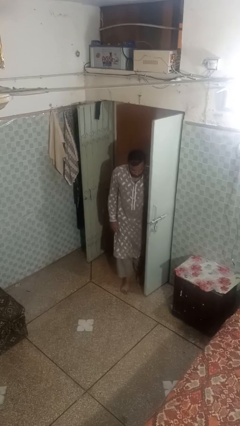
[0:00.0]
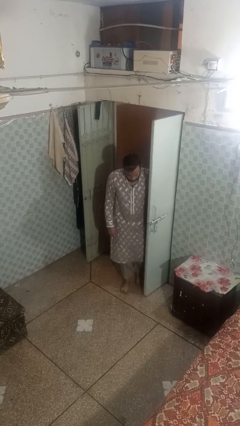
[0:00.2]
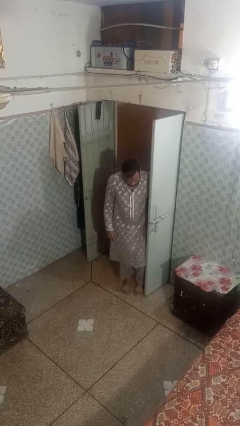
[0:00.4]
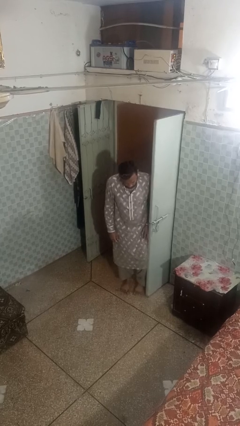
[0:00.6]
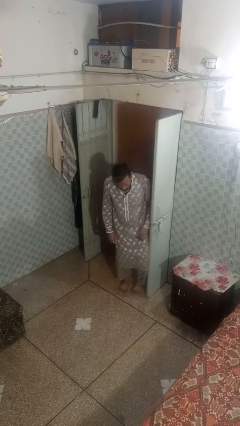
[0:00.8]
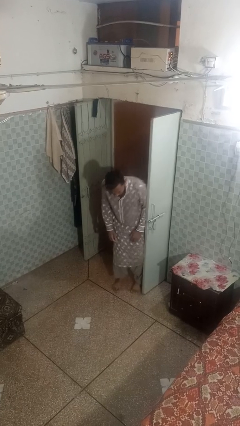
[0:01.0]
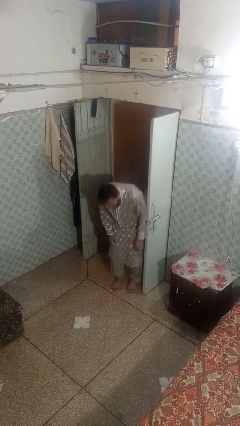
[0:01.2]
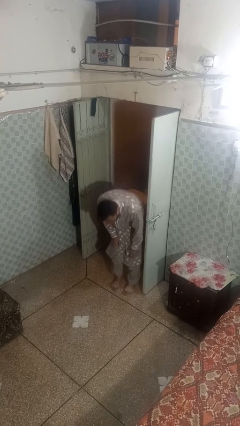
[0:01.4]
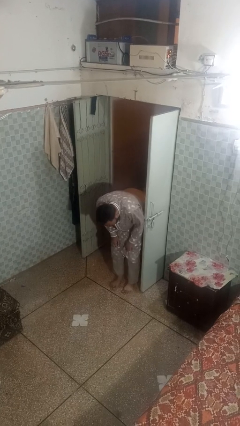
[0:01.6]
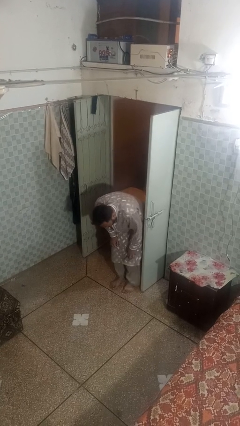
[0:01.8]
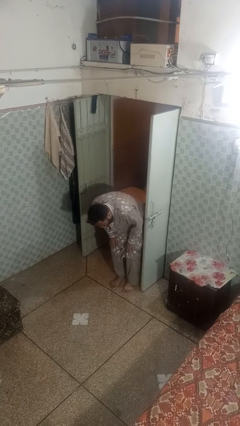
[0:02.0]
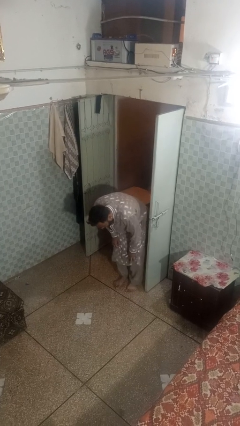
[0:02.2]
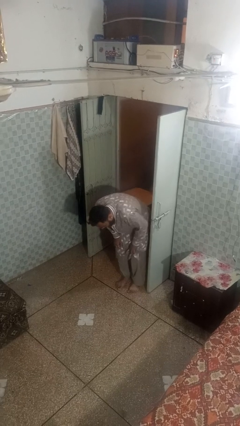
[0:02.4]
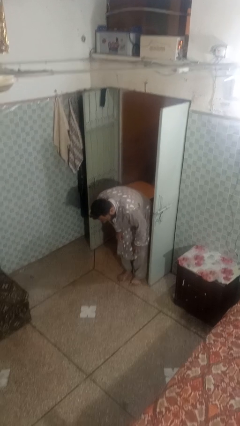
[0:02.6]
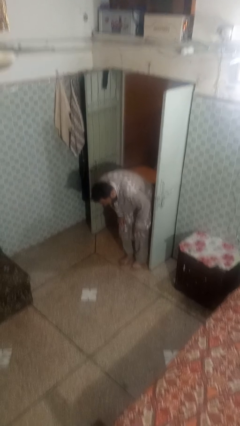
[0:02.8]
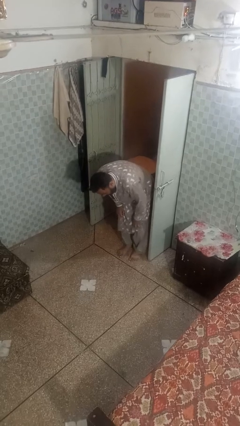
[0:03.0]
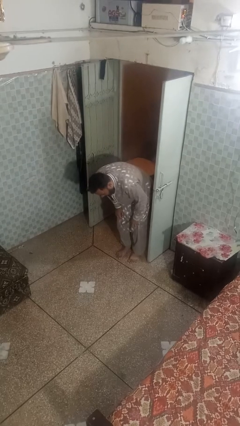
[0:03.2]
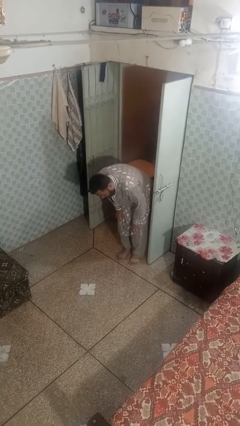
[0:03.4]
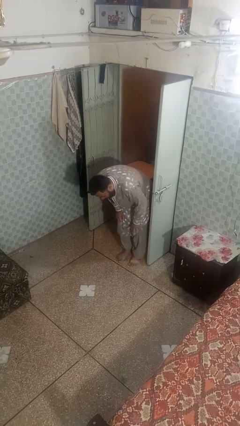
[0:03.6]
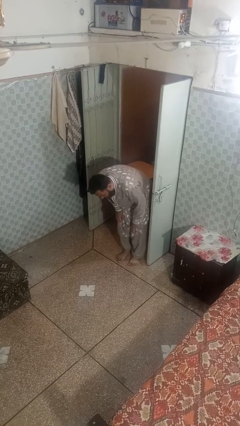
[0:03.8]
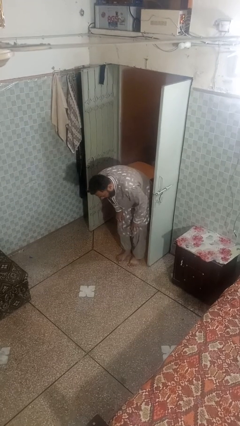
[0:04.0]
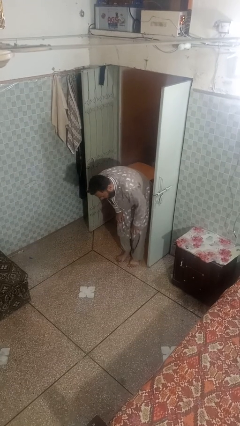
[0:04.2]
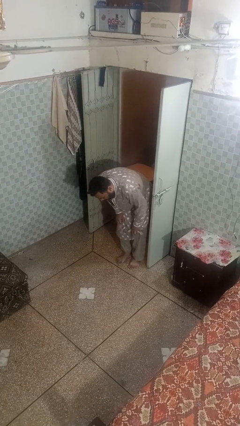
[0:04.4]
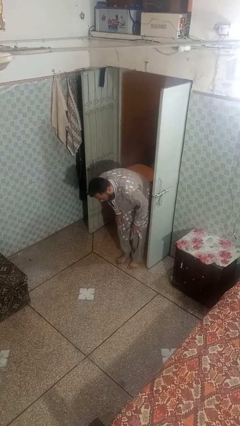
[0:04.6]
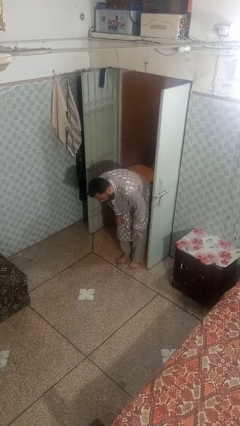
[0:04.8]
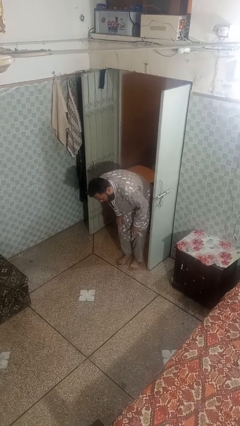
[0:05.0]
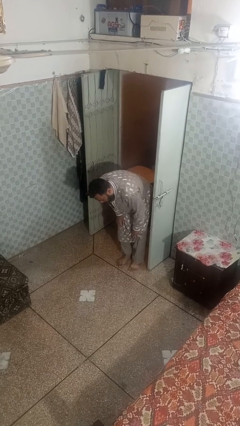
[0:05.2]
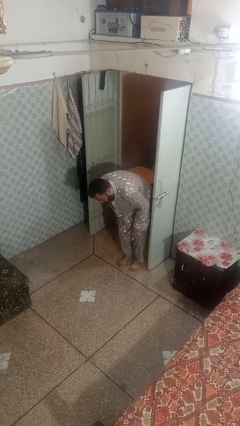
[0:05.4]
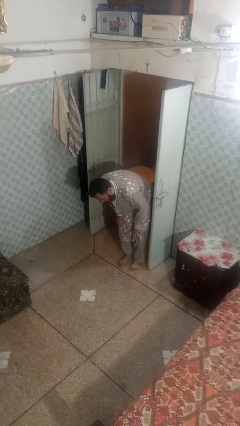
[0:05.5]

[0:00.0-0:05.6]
person trips on object on floor

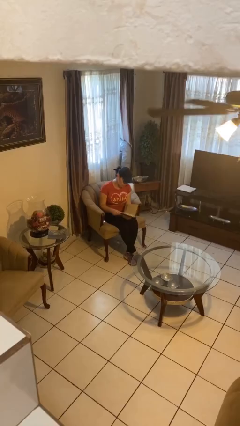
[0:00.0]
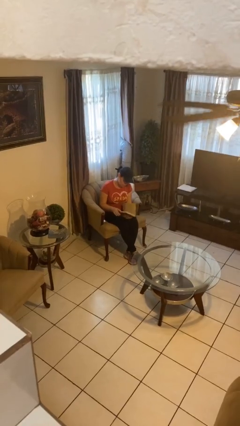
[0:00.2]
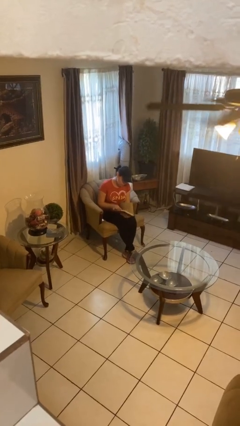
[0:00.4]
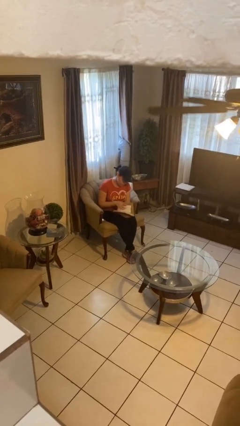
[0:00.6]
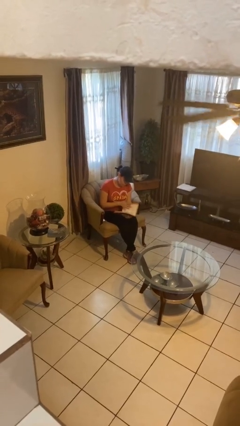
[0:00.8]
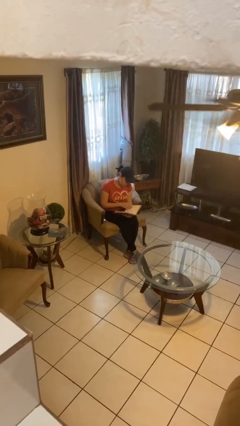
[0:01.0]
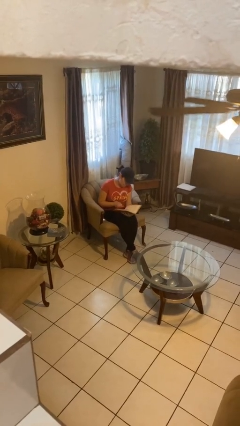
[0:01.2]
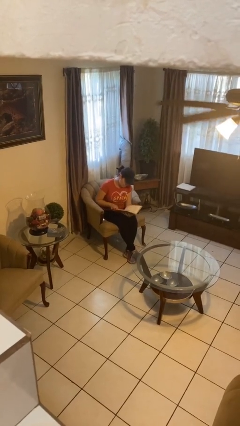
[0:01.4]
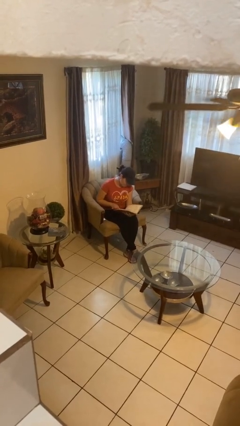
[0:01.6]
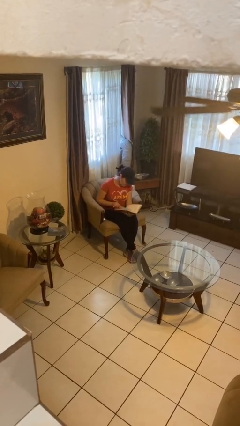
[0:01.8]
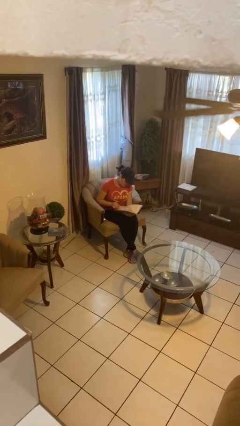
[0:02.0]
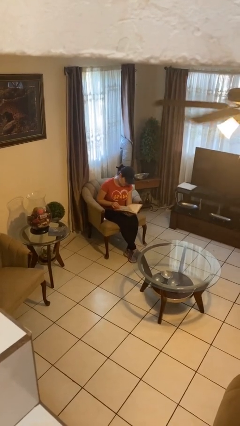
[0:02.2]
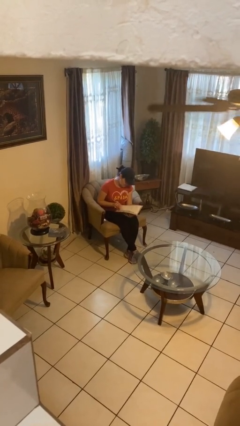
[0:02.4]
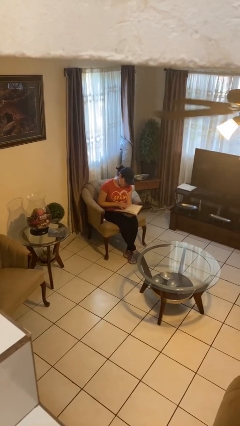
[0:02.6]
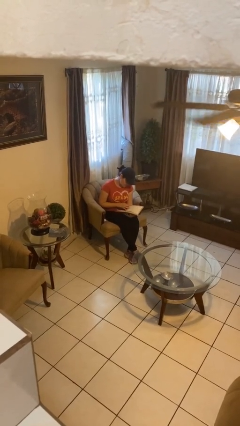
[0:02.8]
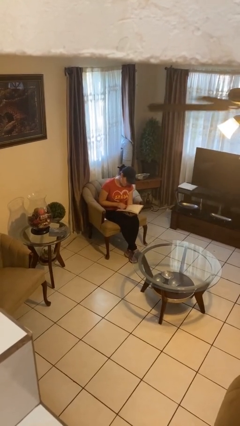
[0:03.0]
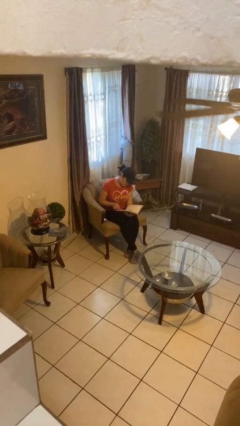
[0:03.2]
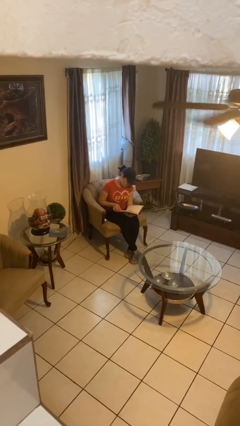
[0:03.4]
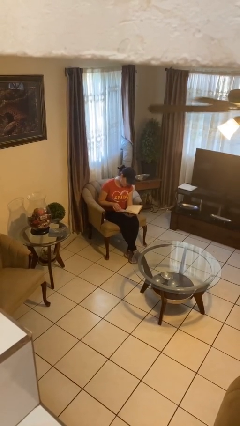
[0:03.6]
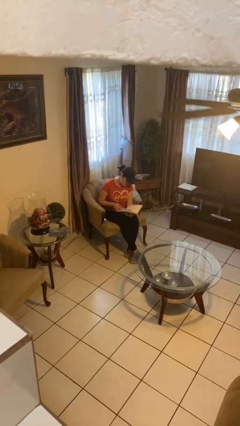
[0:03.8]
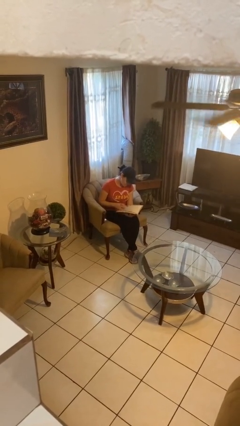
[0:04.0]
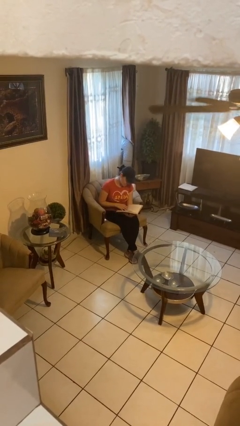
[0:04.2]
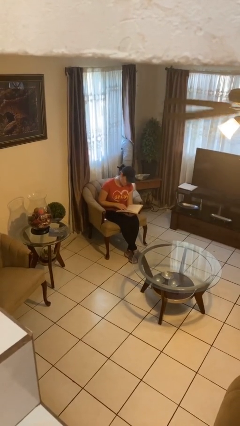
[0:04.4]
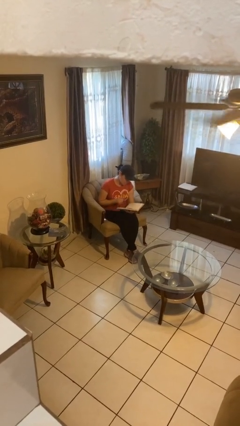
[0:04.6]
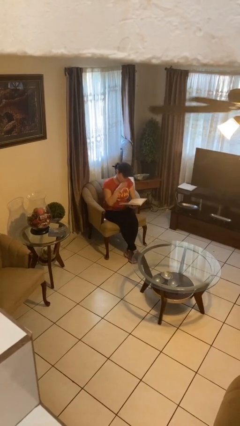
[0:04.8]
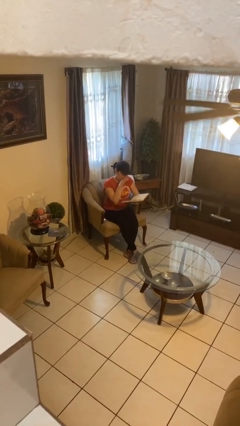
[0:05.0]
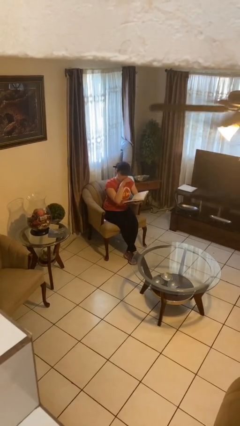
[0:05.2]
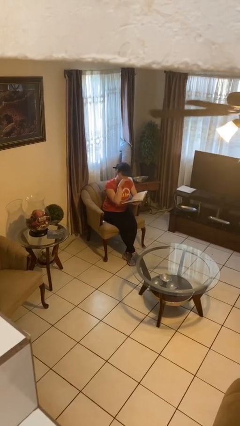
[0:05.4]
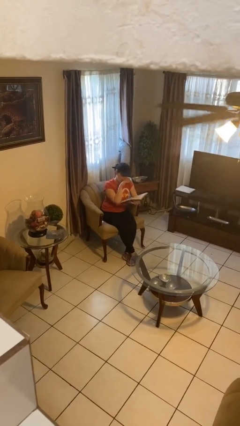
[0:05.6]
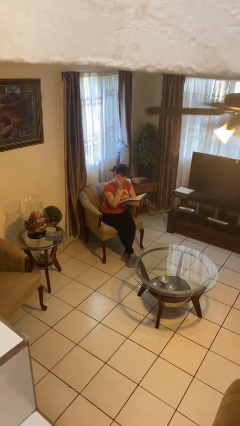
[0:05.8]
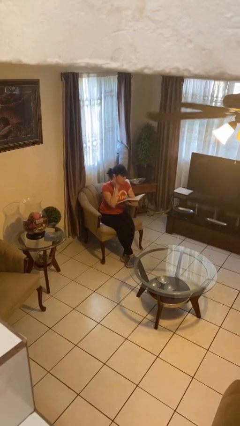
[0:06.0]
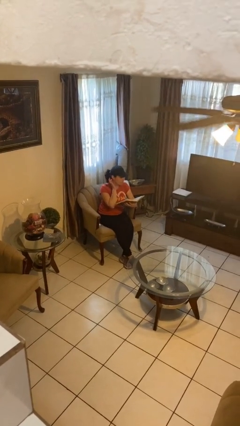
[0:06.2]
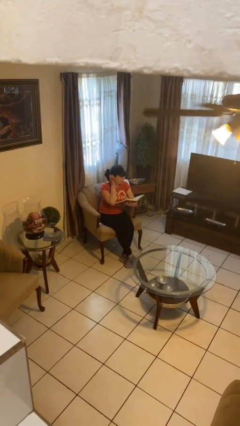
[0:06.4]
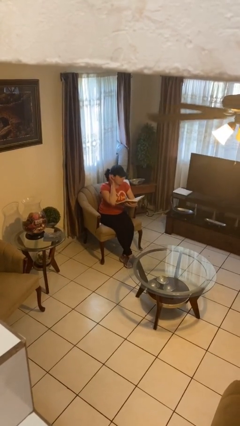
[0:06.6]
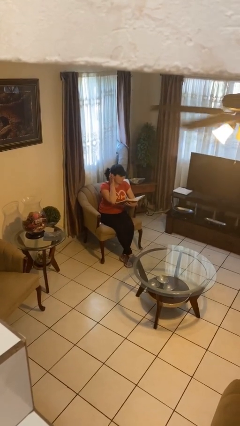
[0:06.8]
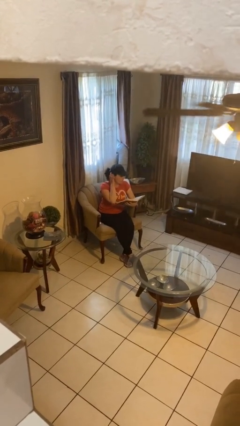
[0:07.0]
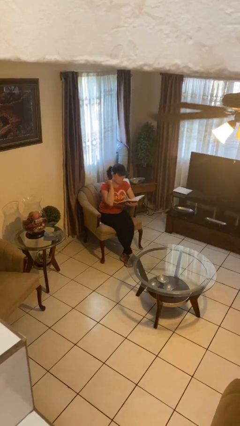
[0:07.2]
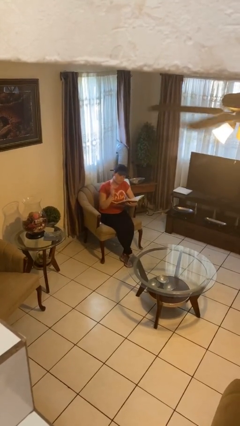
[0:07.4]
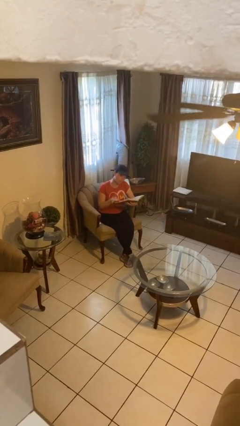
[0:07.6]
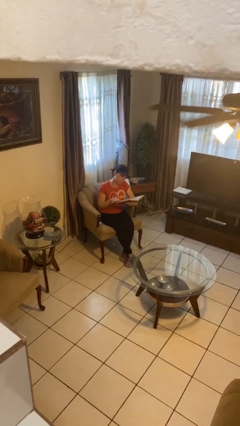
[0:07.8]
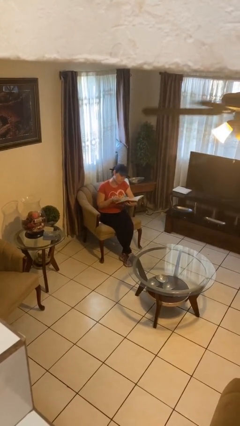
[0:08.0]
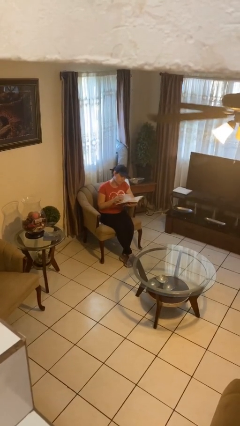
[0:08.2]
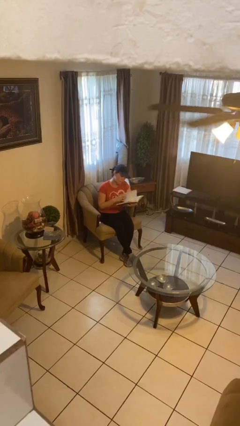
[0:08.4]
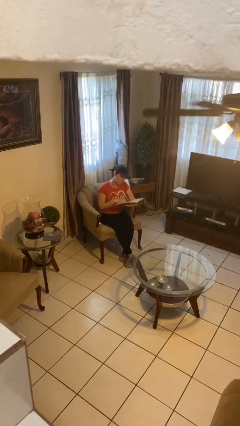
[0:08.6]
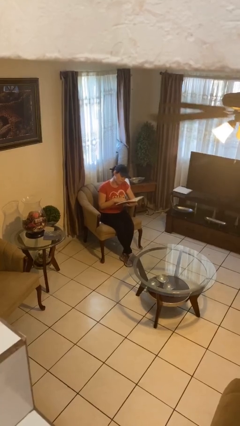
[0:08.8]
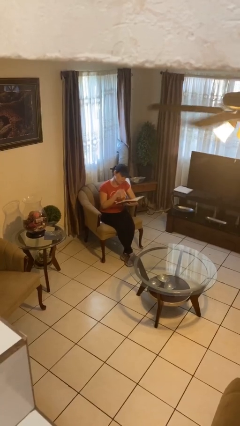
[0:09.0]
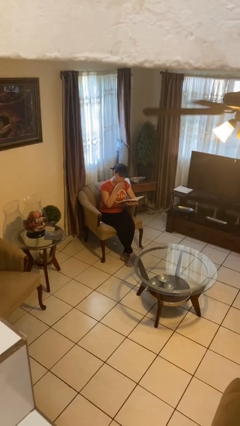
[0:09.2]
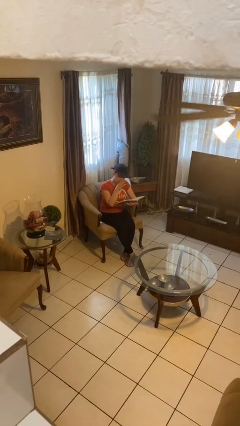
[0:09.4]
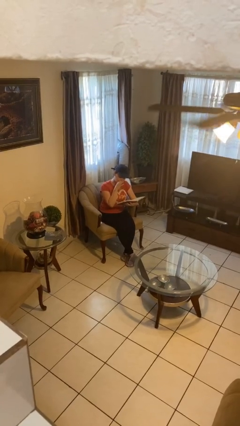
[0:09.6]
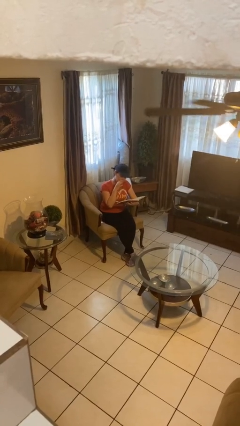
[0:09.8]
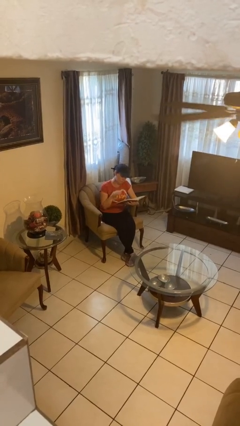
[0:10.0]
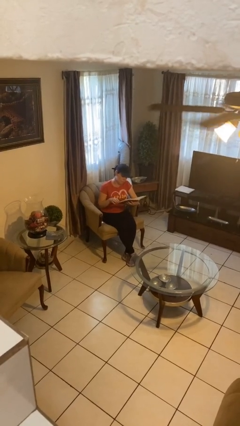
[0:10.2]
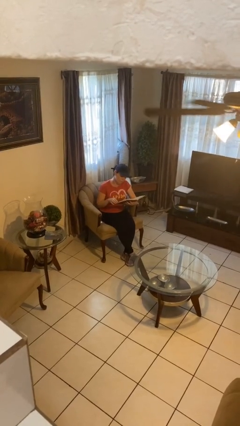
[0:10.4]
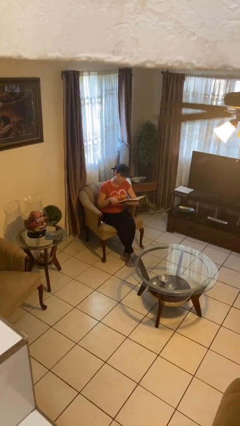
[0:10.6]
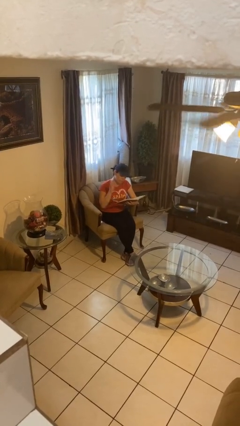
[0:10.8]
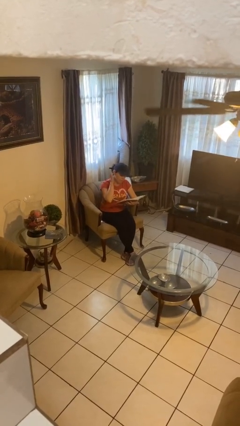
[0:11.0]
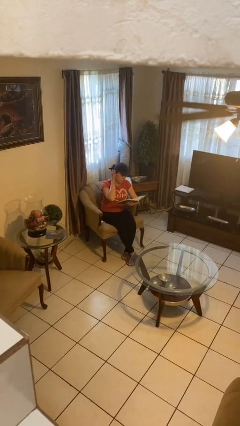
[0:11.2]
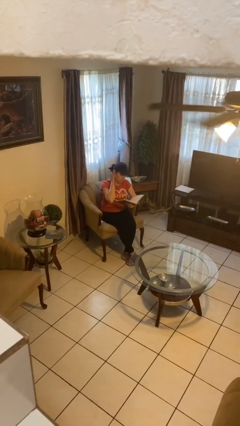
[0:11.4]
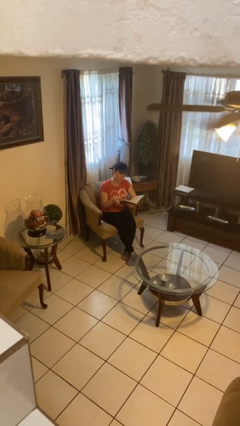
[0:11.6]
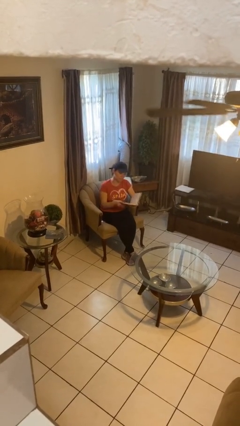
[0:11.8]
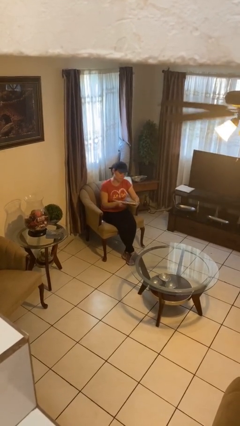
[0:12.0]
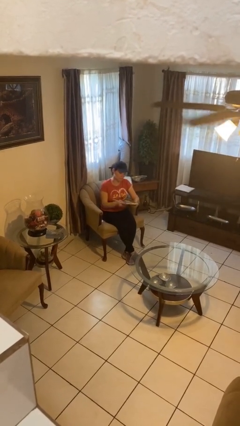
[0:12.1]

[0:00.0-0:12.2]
person reads document

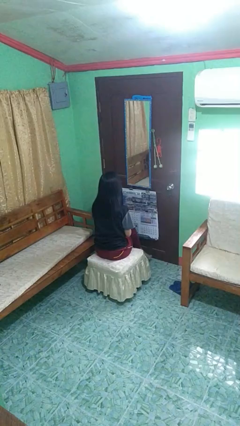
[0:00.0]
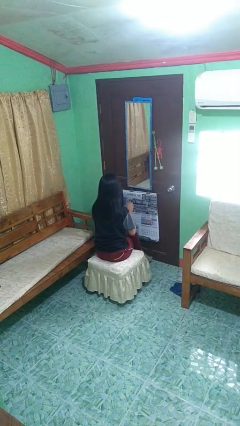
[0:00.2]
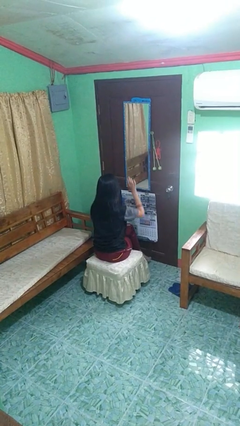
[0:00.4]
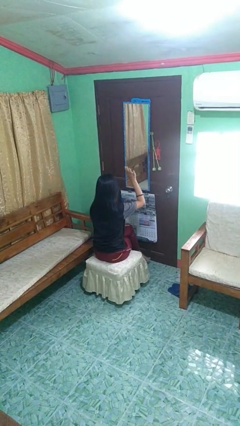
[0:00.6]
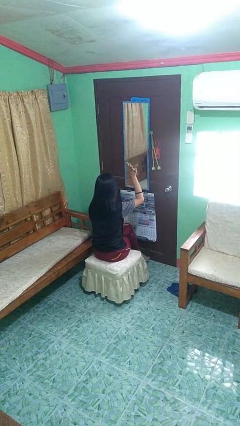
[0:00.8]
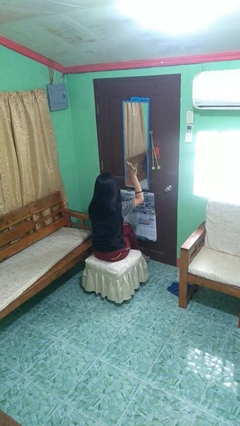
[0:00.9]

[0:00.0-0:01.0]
person gestures raise hand
